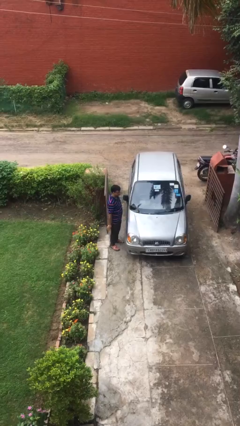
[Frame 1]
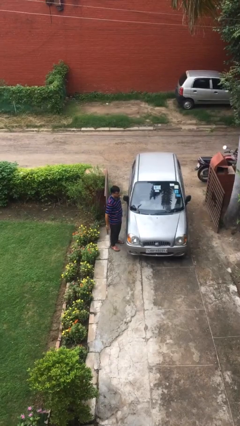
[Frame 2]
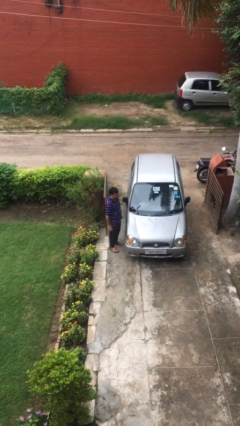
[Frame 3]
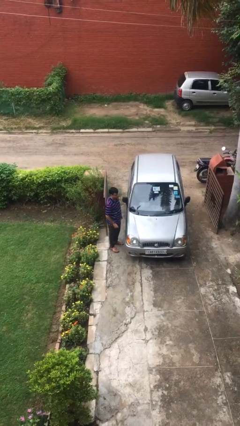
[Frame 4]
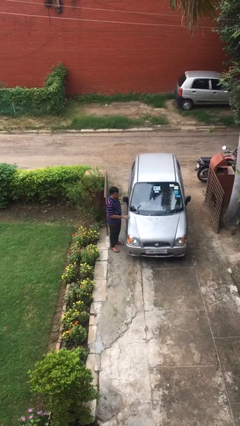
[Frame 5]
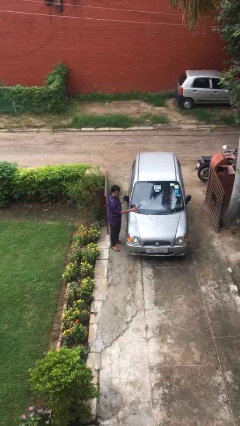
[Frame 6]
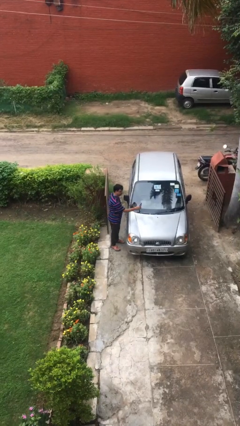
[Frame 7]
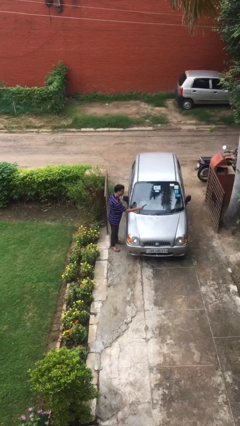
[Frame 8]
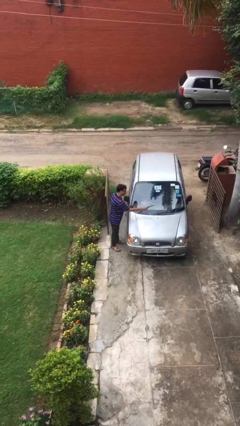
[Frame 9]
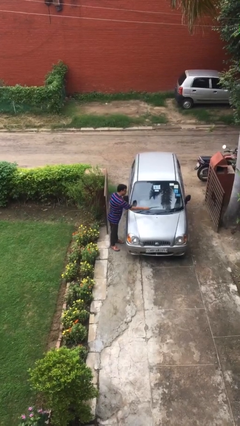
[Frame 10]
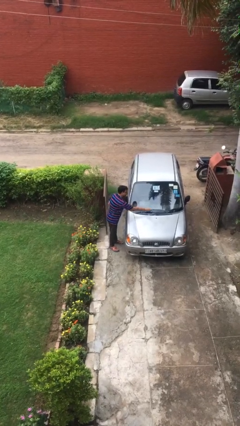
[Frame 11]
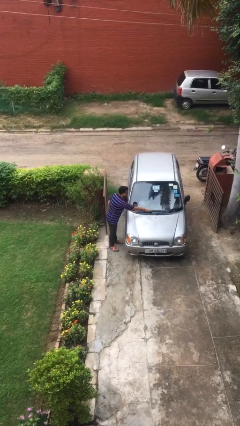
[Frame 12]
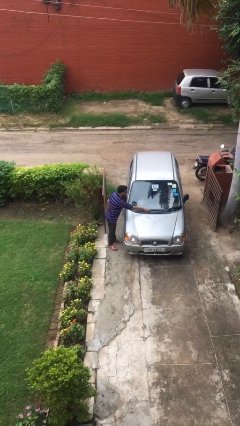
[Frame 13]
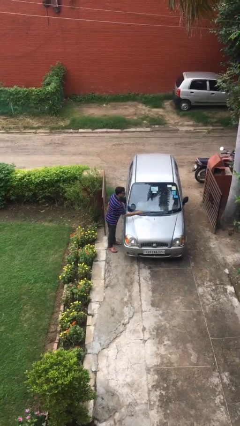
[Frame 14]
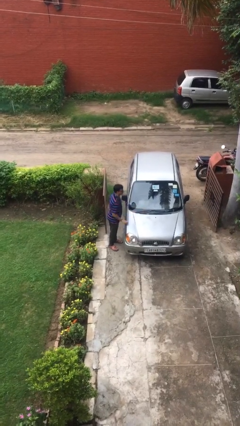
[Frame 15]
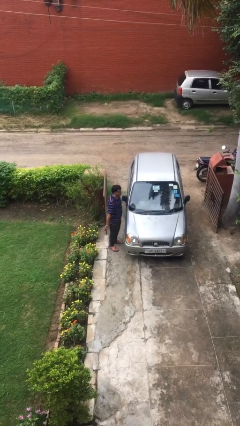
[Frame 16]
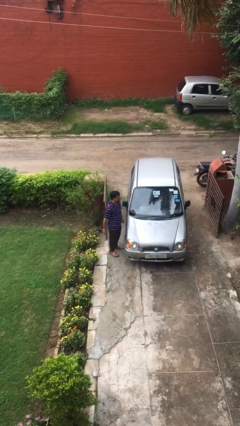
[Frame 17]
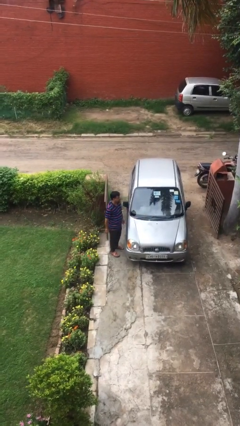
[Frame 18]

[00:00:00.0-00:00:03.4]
person flips down car wipers

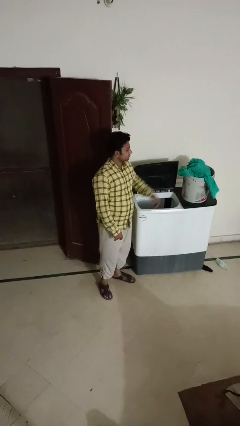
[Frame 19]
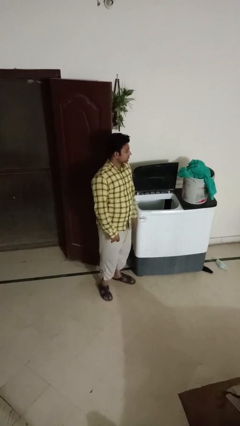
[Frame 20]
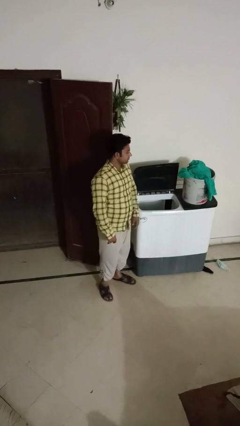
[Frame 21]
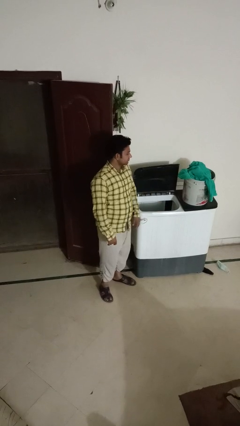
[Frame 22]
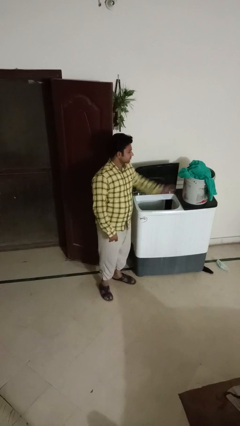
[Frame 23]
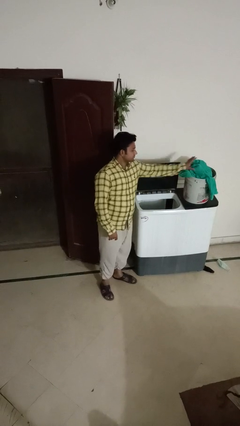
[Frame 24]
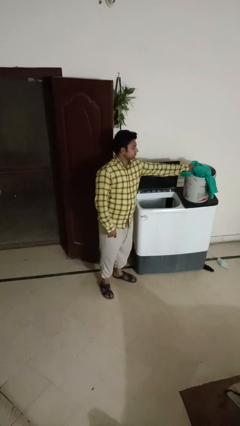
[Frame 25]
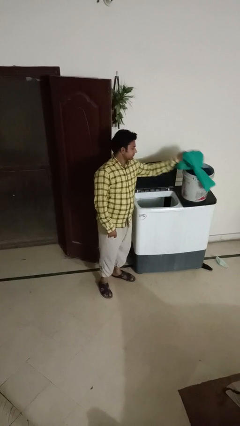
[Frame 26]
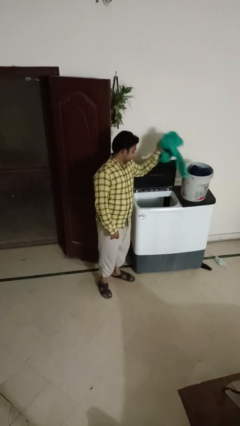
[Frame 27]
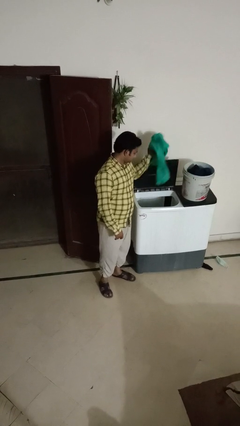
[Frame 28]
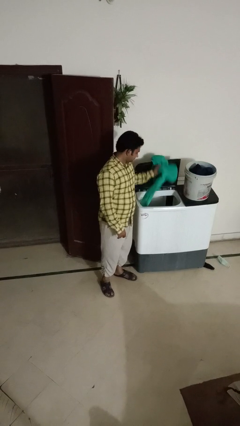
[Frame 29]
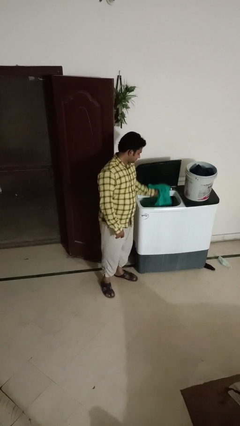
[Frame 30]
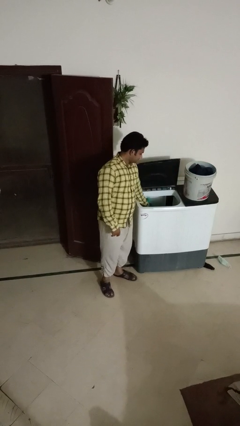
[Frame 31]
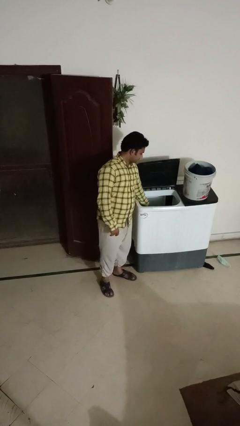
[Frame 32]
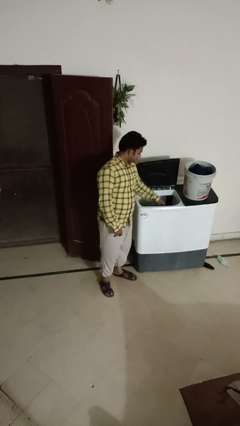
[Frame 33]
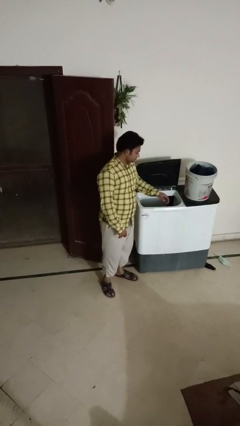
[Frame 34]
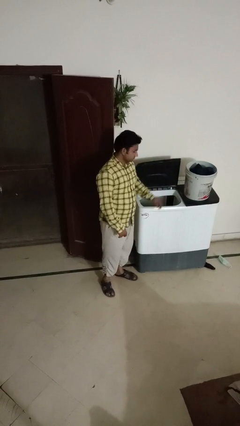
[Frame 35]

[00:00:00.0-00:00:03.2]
person loads clotheswasher

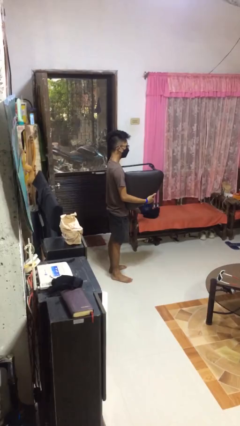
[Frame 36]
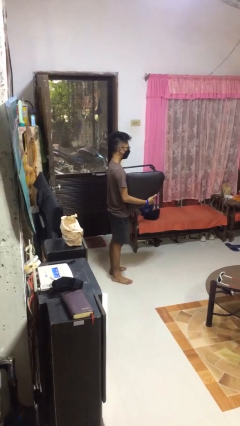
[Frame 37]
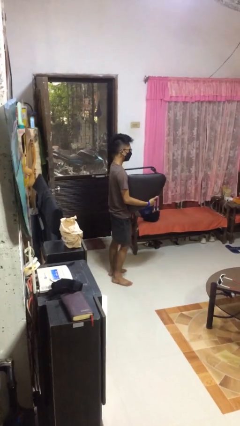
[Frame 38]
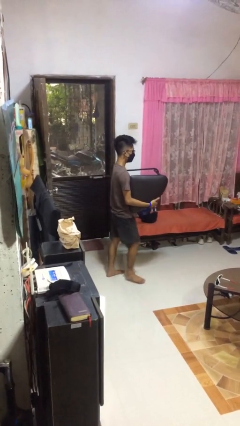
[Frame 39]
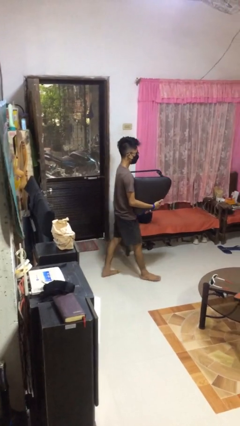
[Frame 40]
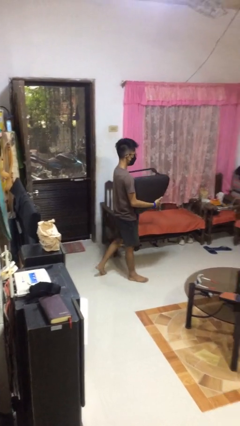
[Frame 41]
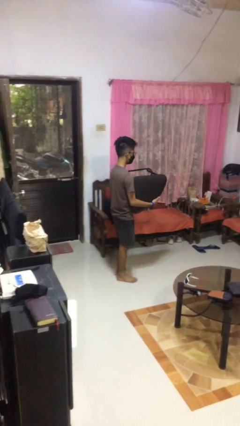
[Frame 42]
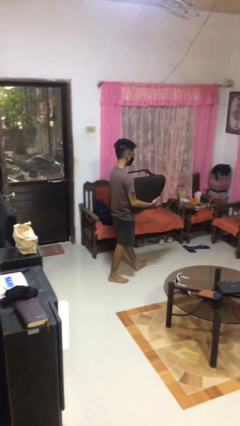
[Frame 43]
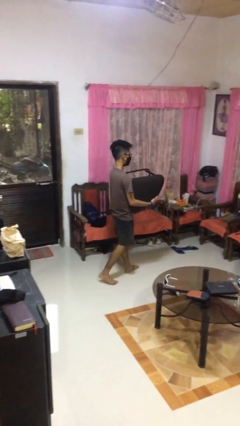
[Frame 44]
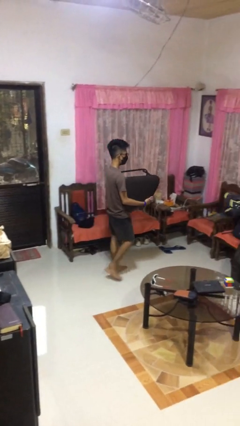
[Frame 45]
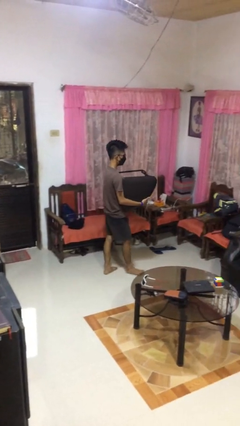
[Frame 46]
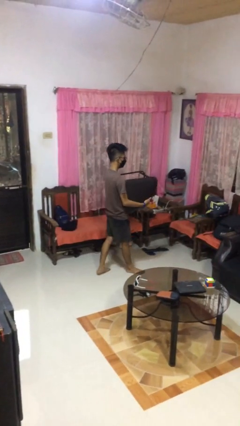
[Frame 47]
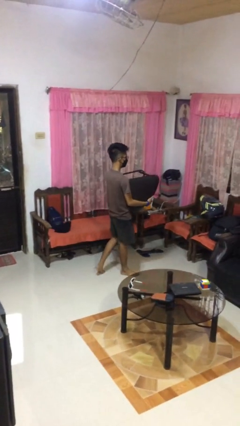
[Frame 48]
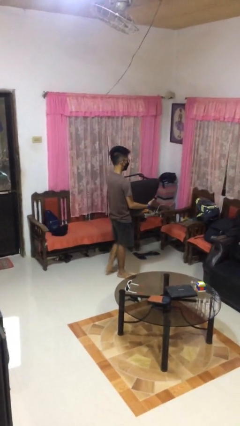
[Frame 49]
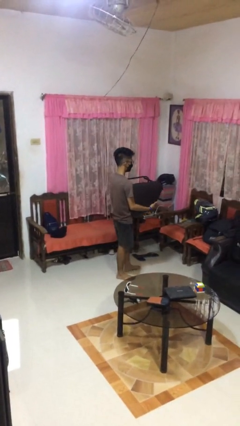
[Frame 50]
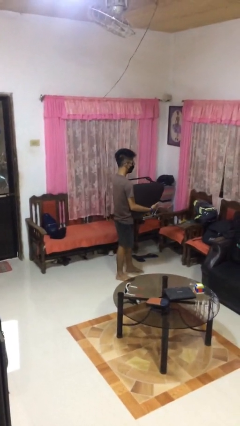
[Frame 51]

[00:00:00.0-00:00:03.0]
person carries furniture

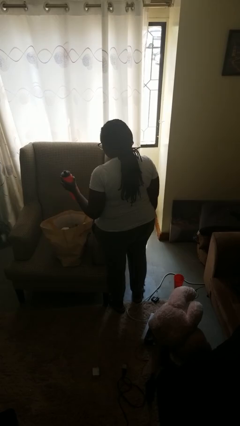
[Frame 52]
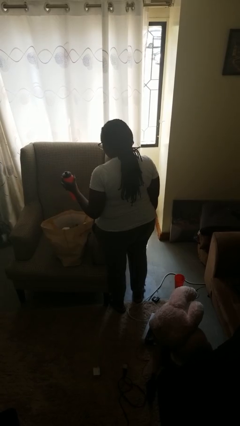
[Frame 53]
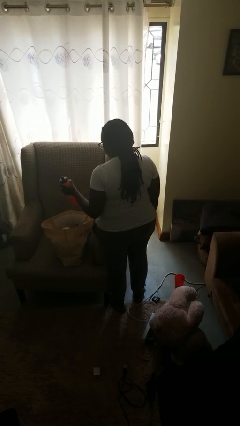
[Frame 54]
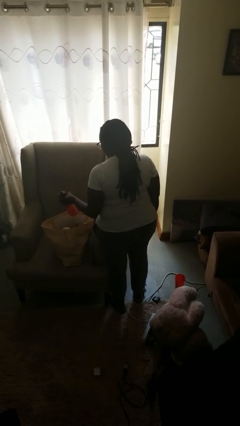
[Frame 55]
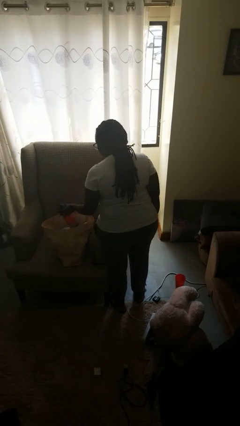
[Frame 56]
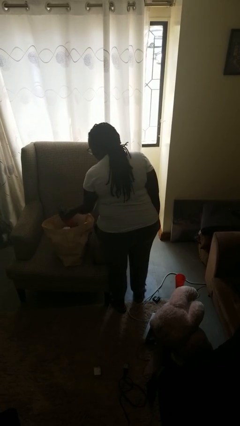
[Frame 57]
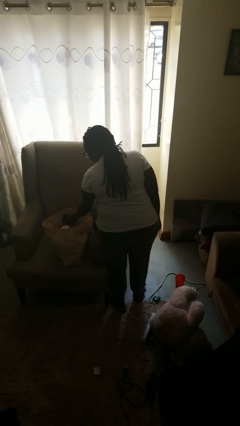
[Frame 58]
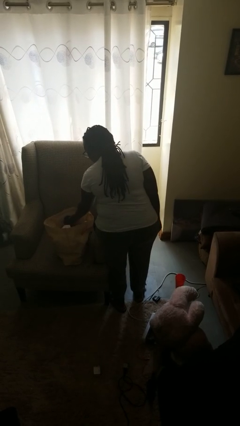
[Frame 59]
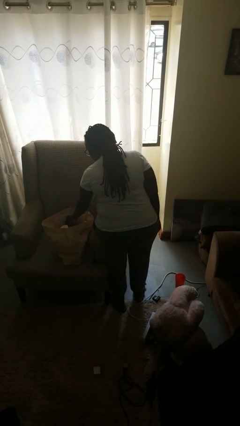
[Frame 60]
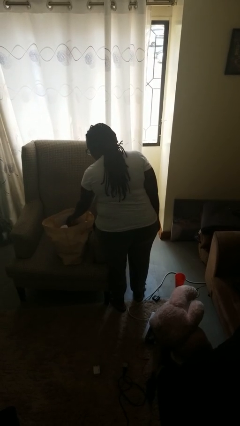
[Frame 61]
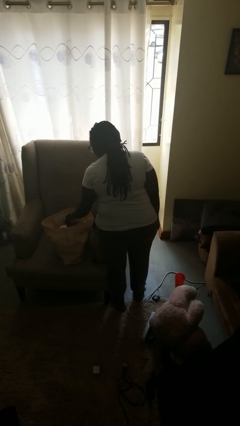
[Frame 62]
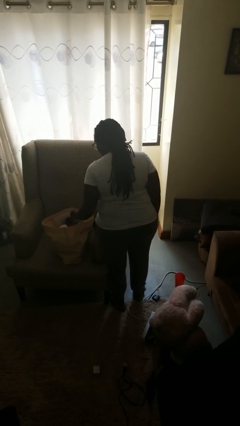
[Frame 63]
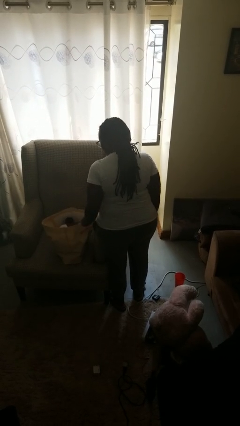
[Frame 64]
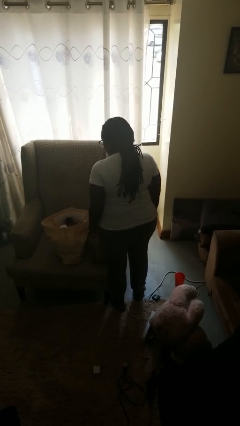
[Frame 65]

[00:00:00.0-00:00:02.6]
person puts object into bag

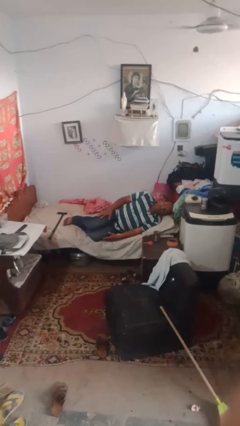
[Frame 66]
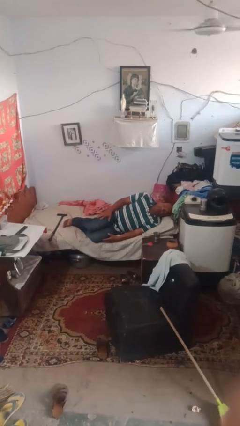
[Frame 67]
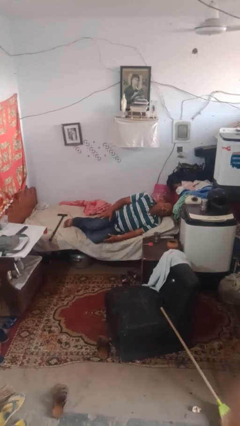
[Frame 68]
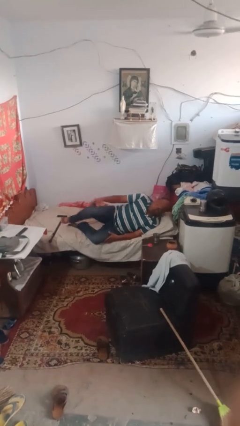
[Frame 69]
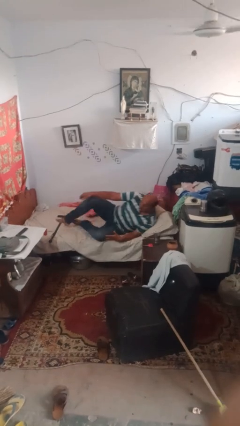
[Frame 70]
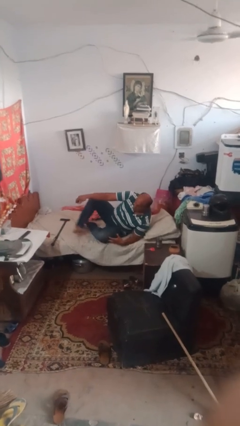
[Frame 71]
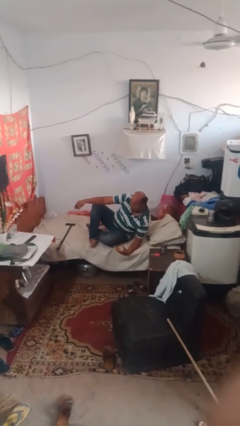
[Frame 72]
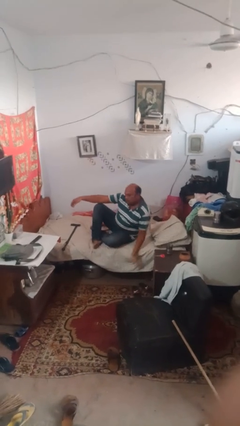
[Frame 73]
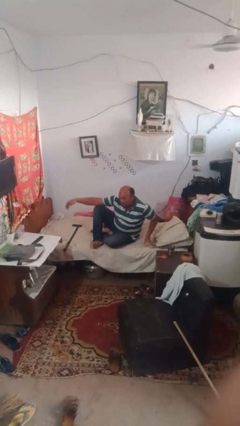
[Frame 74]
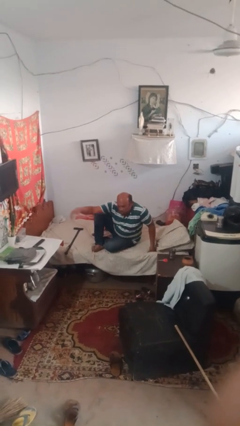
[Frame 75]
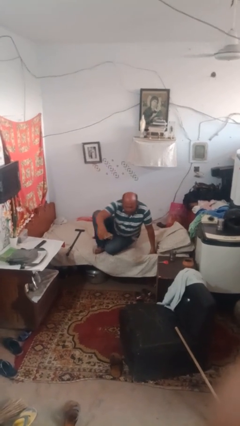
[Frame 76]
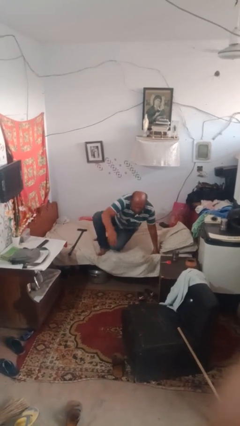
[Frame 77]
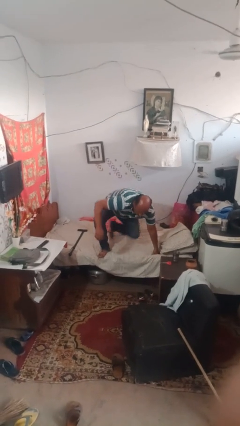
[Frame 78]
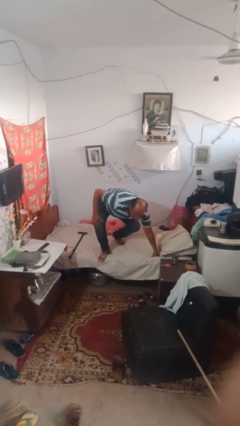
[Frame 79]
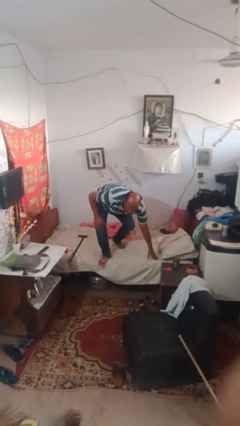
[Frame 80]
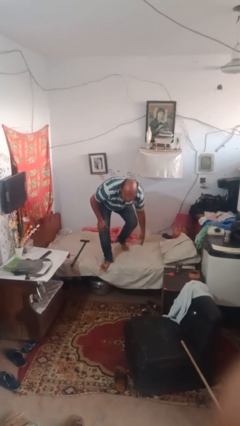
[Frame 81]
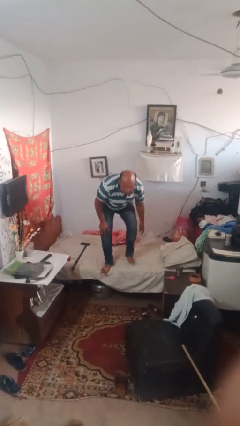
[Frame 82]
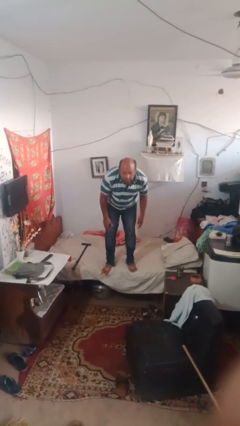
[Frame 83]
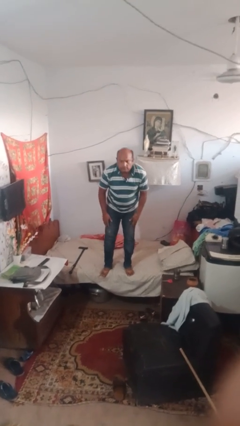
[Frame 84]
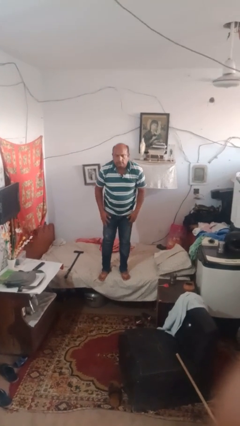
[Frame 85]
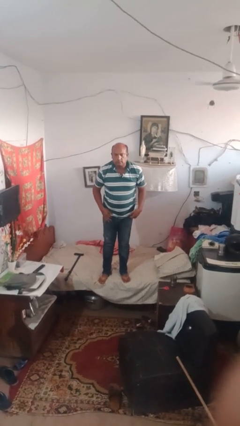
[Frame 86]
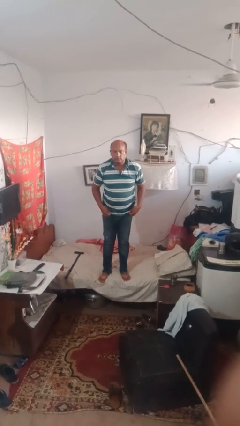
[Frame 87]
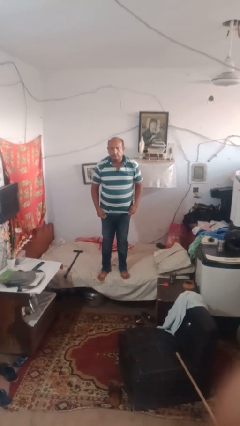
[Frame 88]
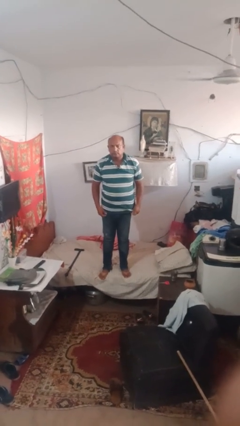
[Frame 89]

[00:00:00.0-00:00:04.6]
person stands up

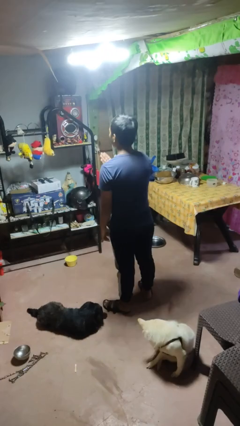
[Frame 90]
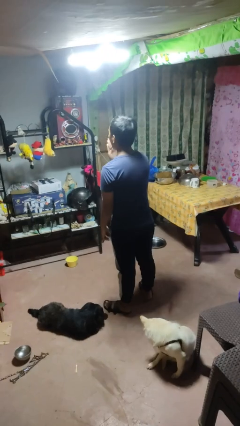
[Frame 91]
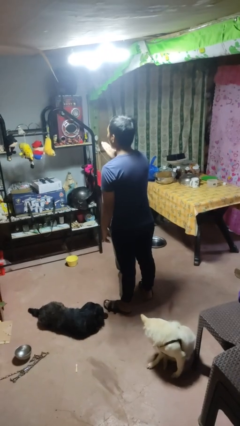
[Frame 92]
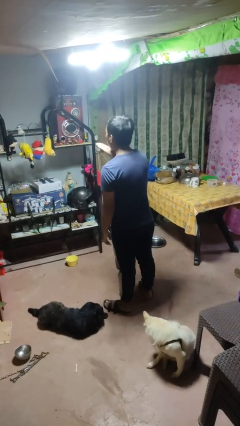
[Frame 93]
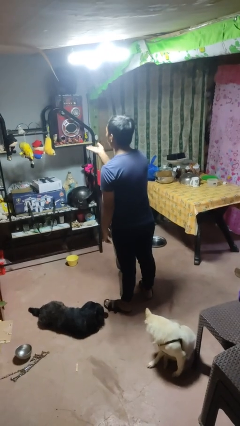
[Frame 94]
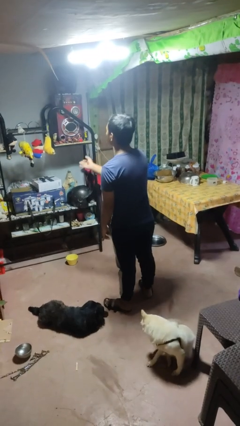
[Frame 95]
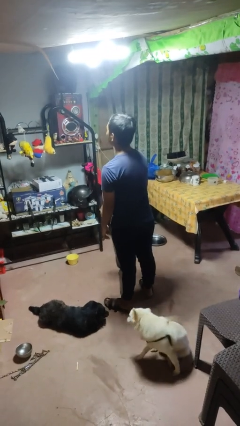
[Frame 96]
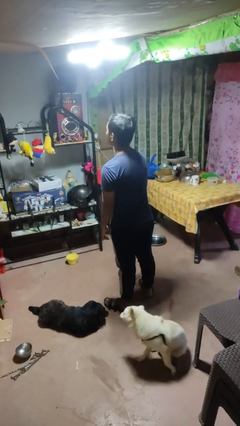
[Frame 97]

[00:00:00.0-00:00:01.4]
person gestures blow kiss
